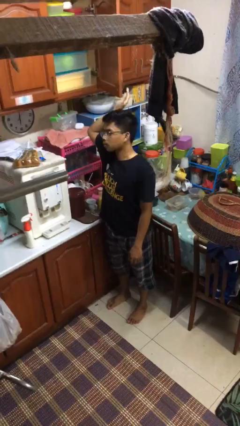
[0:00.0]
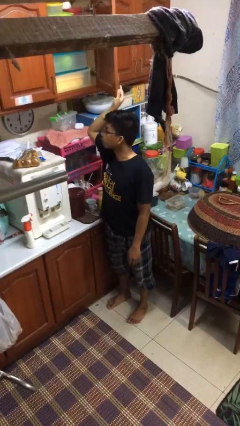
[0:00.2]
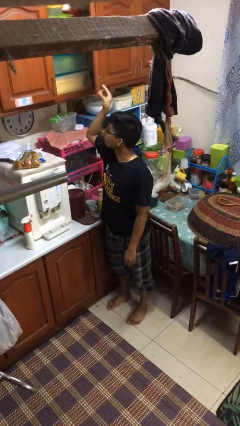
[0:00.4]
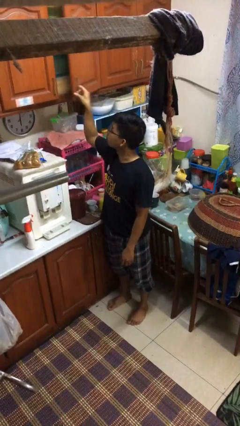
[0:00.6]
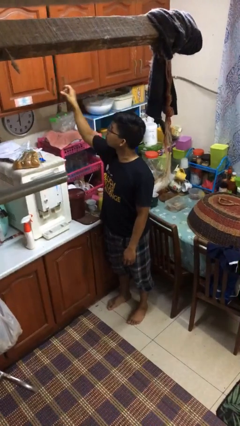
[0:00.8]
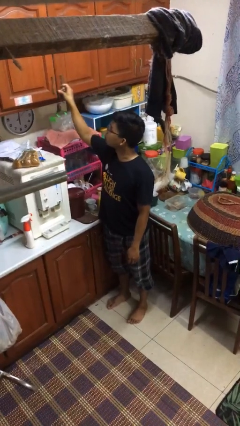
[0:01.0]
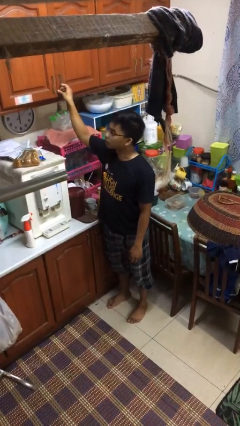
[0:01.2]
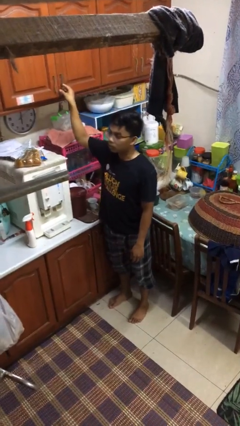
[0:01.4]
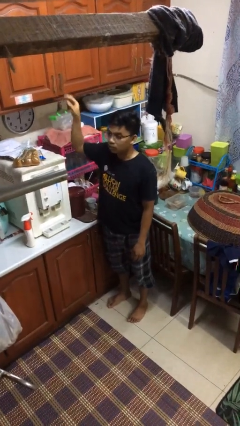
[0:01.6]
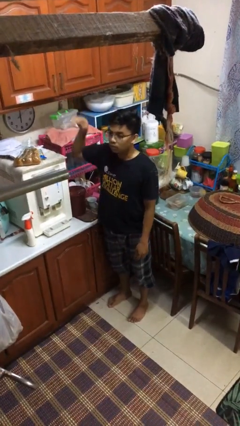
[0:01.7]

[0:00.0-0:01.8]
person closes kitchen drawer

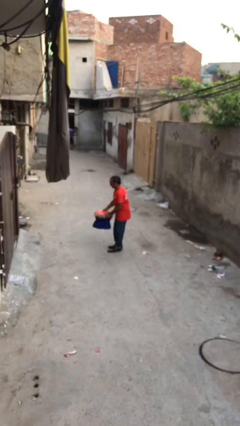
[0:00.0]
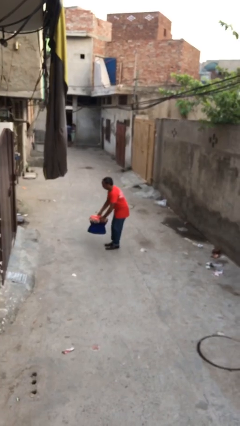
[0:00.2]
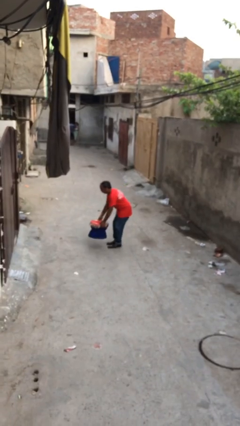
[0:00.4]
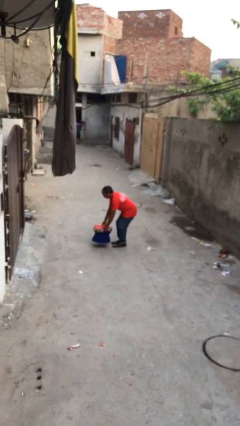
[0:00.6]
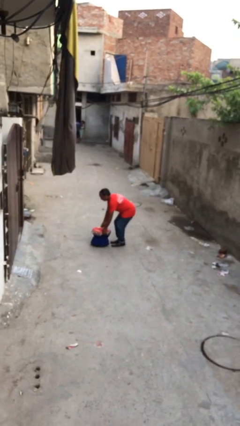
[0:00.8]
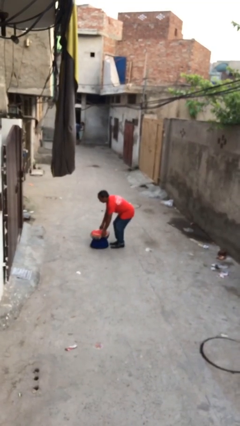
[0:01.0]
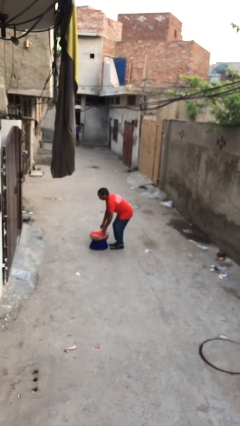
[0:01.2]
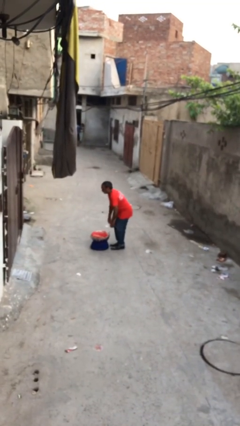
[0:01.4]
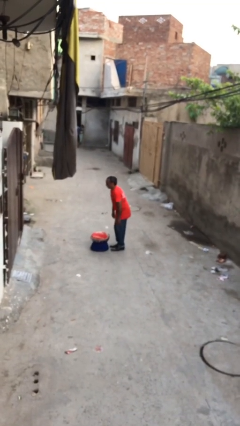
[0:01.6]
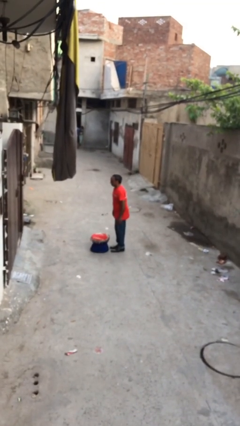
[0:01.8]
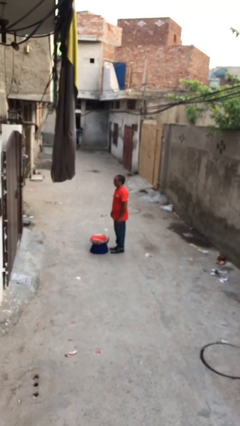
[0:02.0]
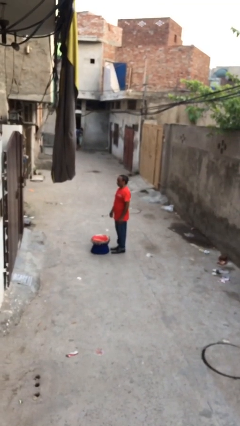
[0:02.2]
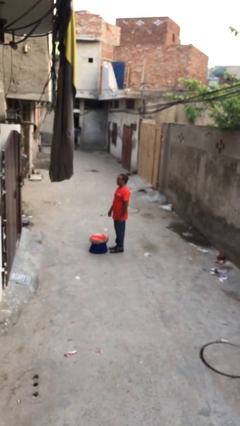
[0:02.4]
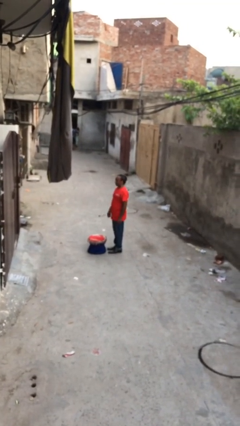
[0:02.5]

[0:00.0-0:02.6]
person puts down object on floor

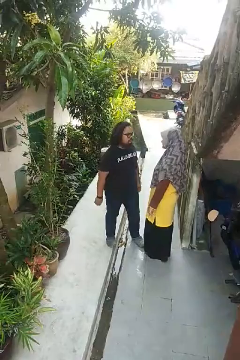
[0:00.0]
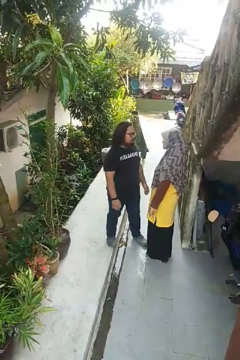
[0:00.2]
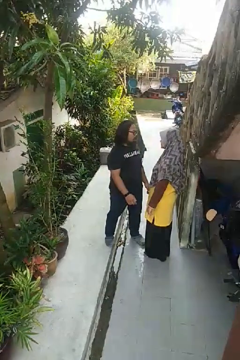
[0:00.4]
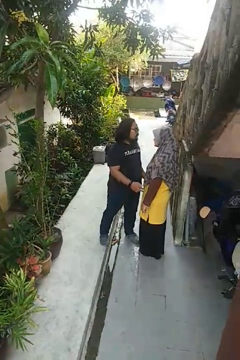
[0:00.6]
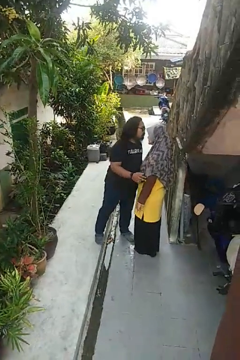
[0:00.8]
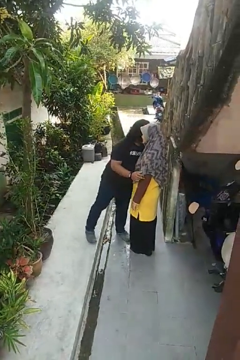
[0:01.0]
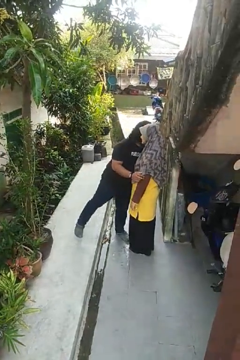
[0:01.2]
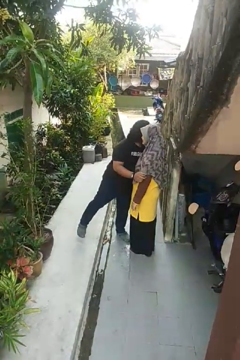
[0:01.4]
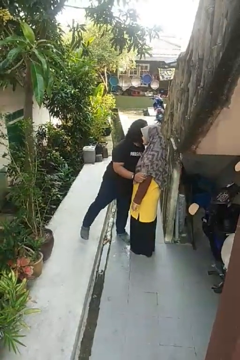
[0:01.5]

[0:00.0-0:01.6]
person kisses cheek of person

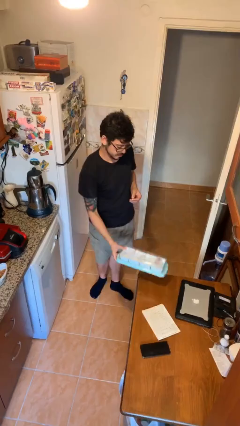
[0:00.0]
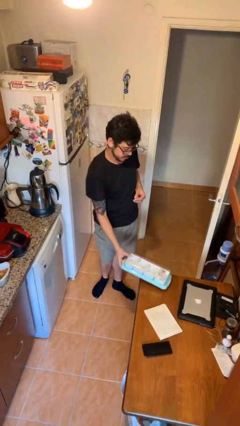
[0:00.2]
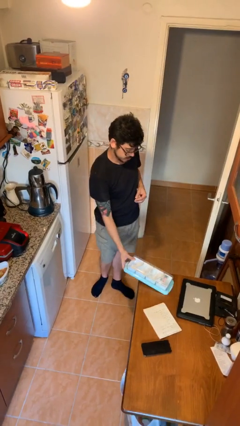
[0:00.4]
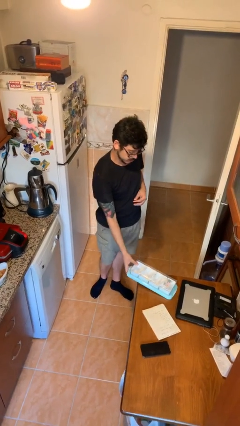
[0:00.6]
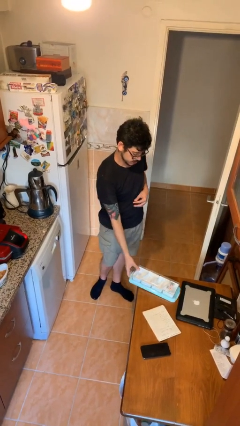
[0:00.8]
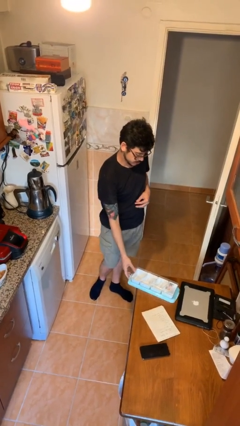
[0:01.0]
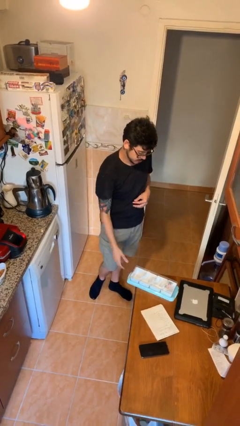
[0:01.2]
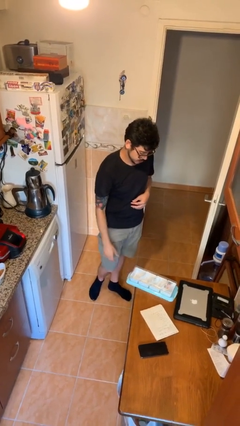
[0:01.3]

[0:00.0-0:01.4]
person puts down object on table

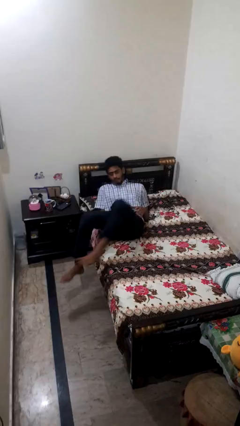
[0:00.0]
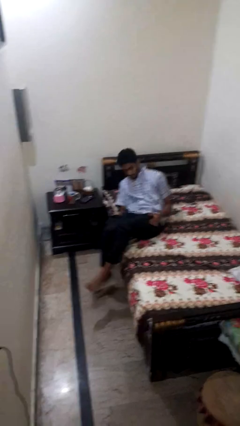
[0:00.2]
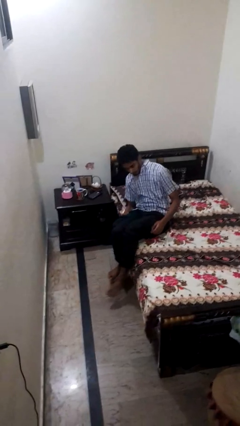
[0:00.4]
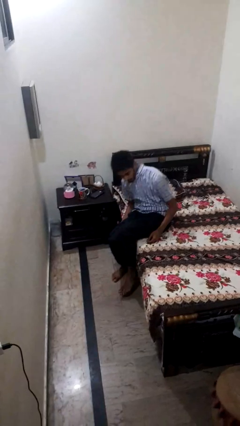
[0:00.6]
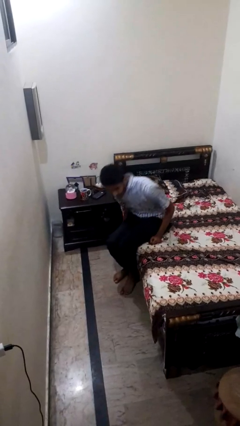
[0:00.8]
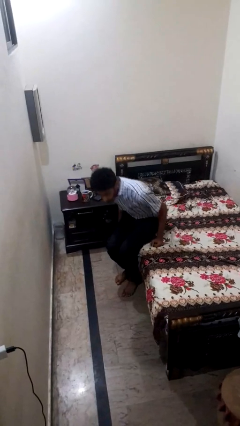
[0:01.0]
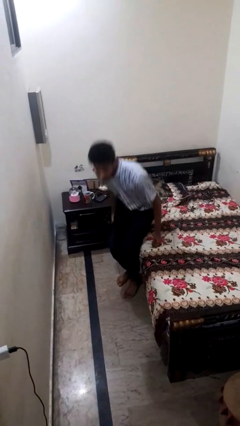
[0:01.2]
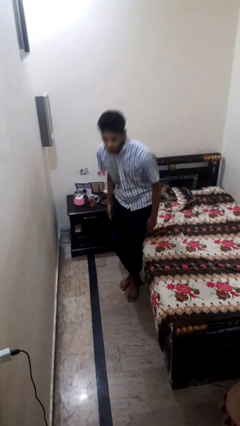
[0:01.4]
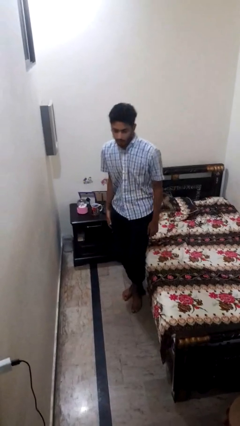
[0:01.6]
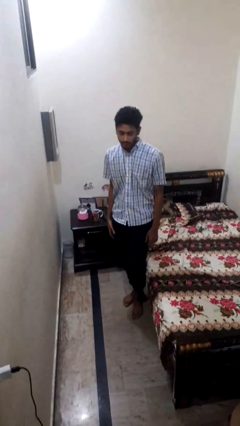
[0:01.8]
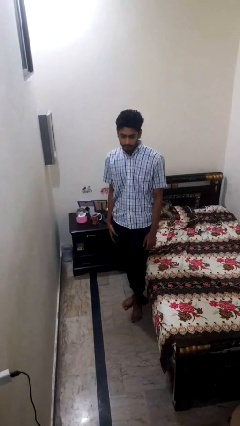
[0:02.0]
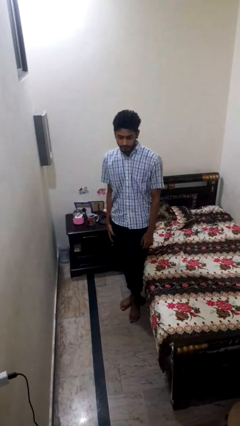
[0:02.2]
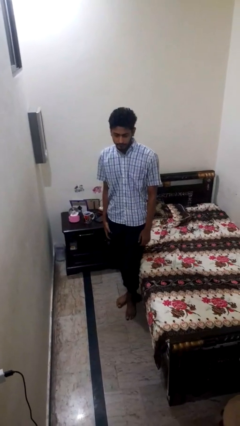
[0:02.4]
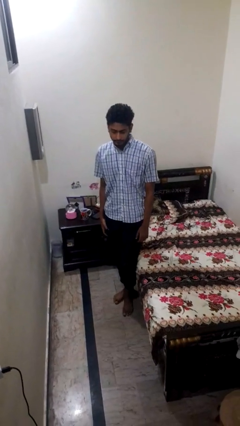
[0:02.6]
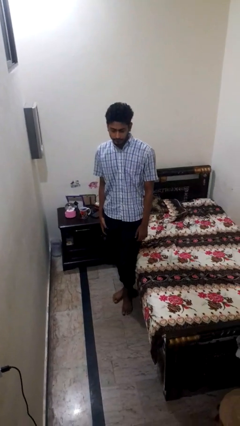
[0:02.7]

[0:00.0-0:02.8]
person stands up

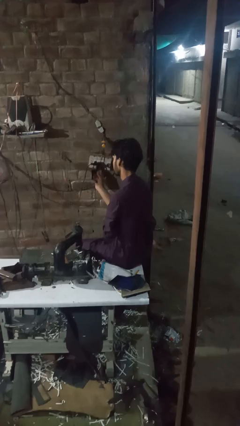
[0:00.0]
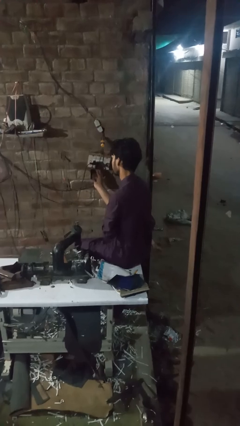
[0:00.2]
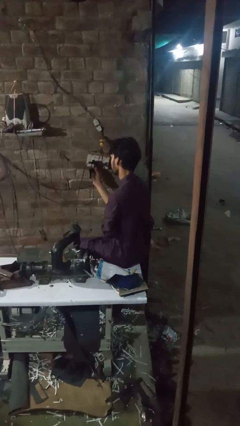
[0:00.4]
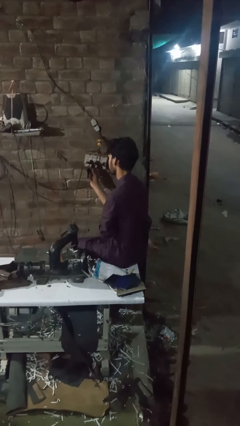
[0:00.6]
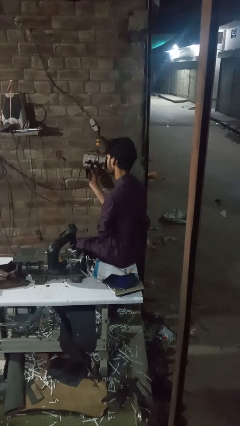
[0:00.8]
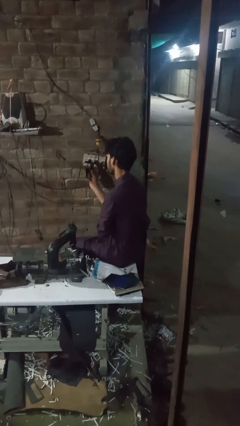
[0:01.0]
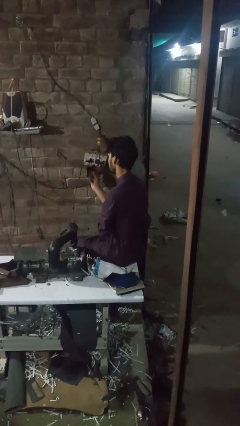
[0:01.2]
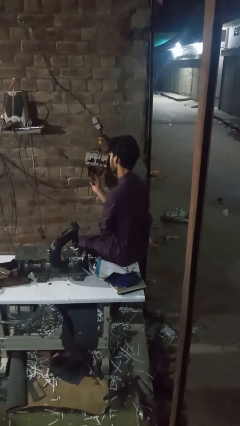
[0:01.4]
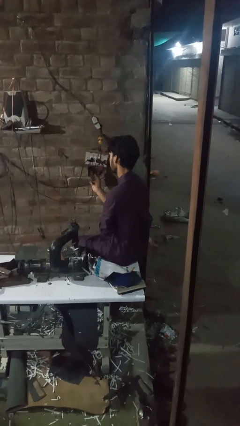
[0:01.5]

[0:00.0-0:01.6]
person unplugs from electrical socket

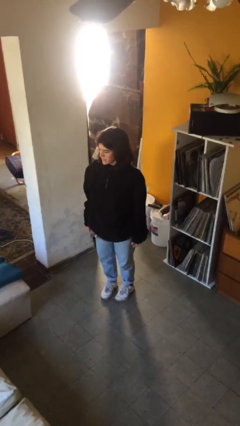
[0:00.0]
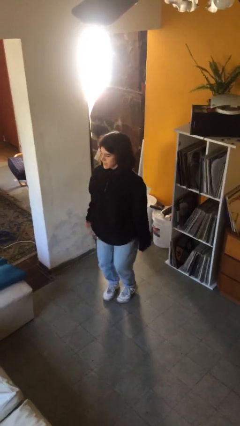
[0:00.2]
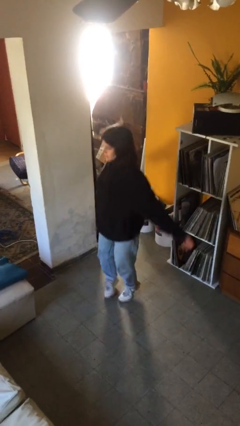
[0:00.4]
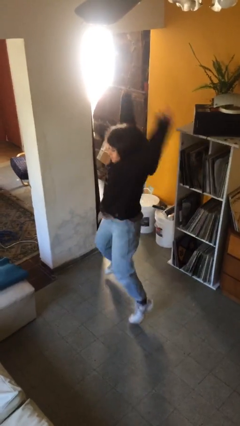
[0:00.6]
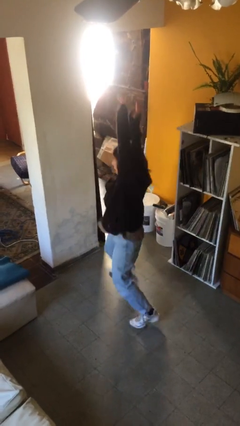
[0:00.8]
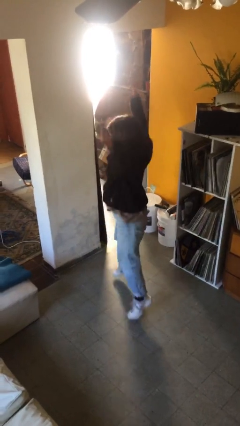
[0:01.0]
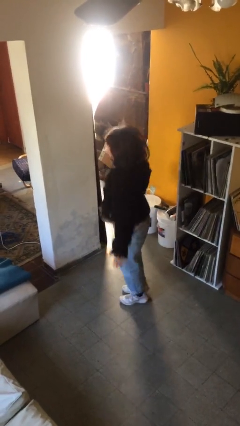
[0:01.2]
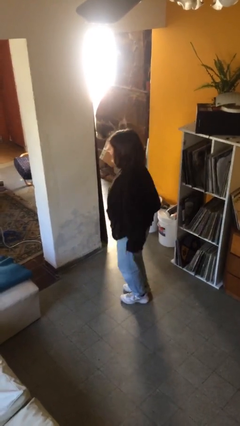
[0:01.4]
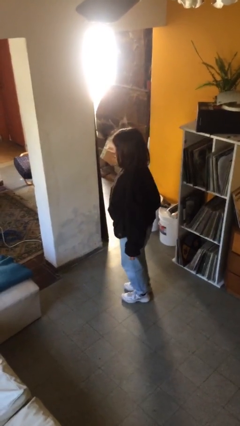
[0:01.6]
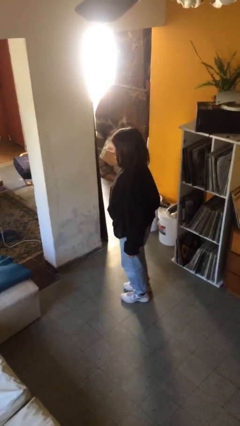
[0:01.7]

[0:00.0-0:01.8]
person exercises with jumping jacks

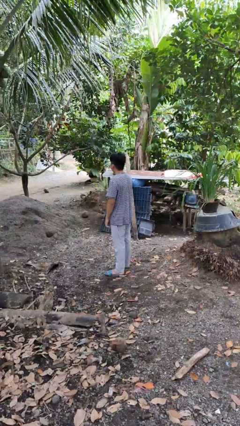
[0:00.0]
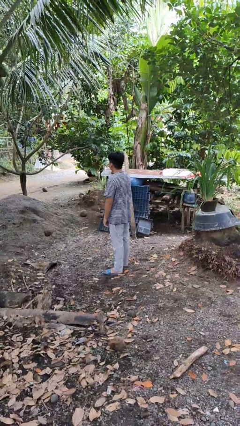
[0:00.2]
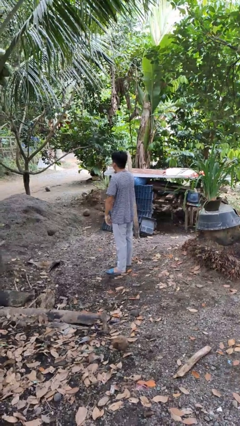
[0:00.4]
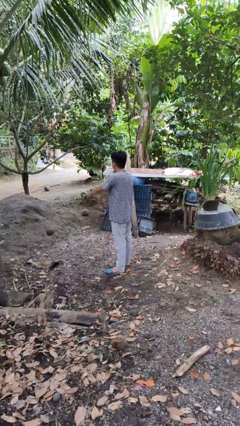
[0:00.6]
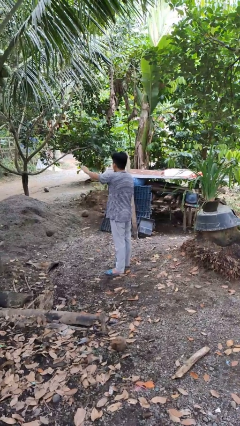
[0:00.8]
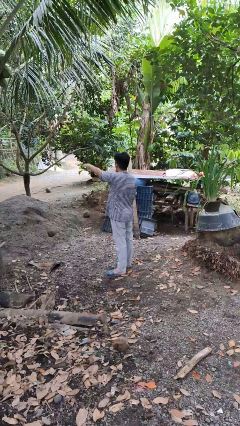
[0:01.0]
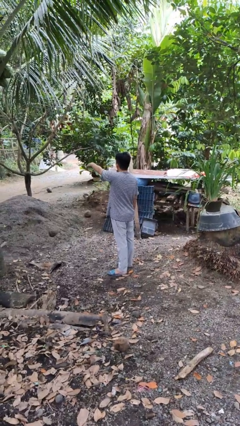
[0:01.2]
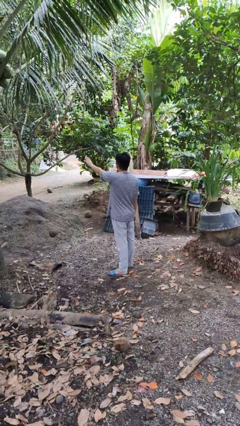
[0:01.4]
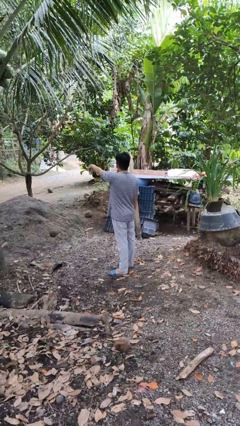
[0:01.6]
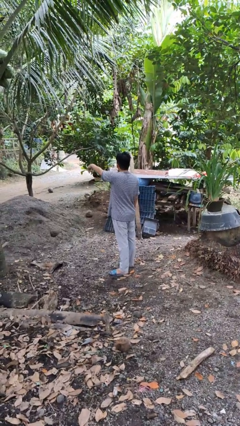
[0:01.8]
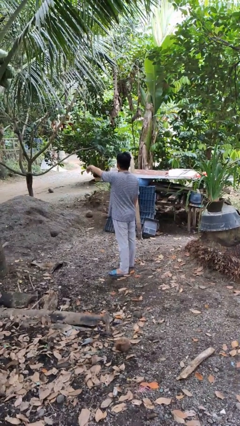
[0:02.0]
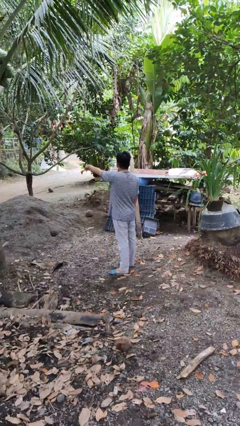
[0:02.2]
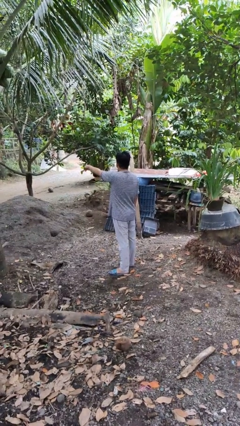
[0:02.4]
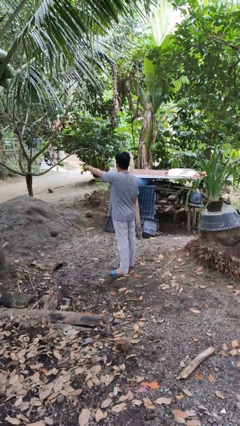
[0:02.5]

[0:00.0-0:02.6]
person gestures come here

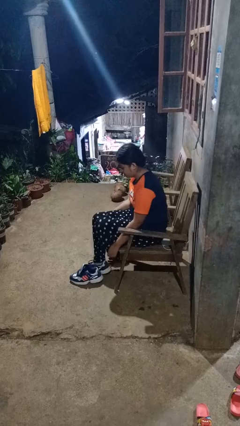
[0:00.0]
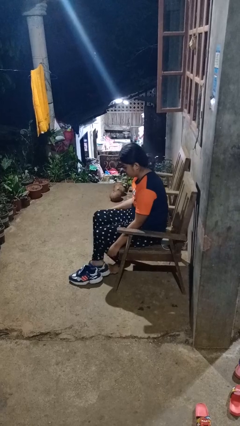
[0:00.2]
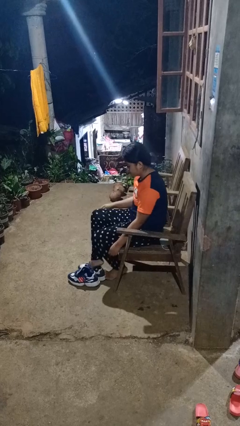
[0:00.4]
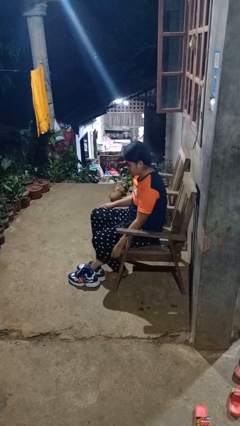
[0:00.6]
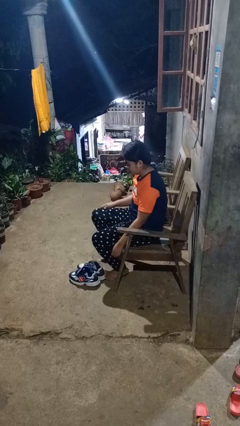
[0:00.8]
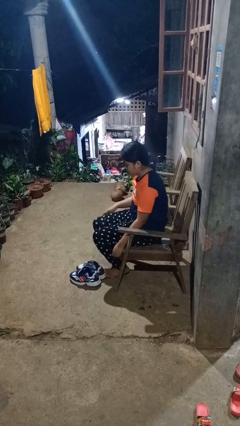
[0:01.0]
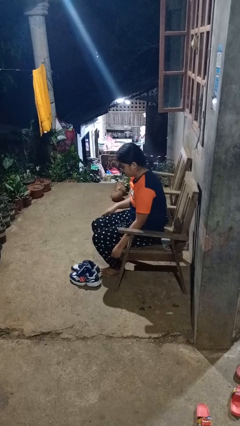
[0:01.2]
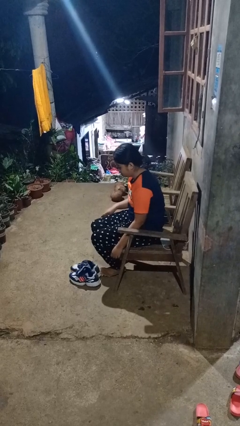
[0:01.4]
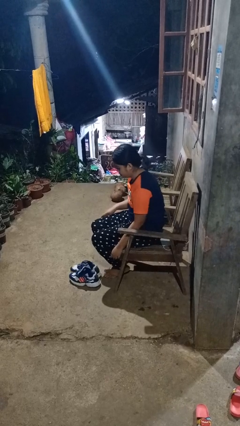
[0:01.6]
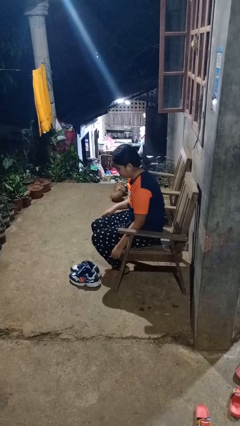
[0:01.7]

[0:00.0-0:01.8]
person takes off shoes
